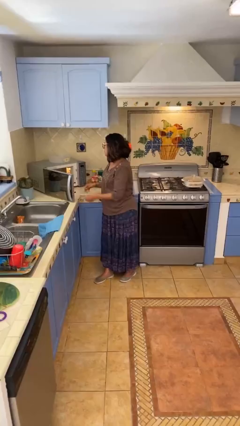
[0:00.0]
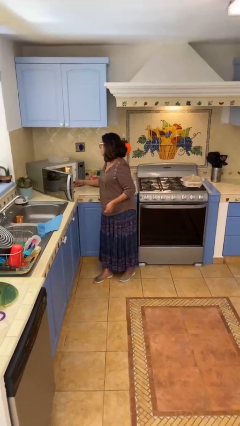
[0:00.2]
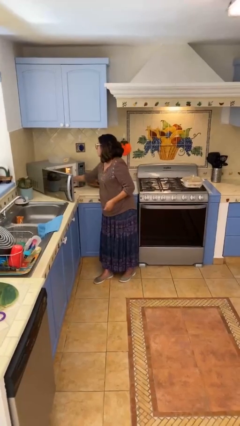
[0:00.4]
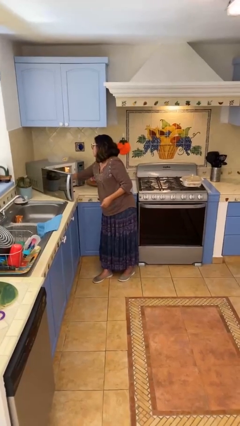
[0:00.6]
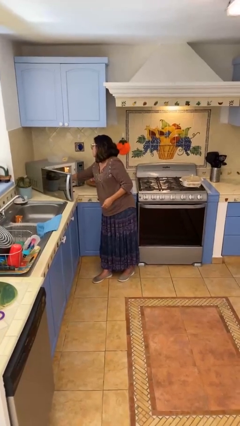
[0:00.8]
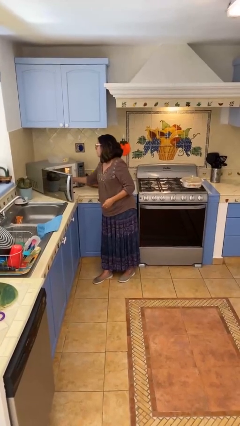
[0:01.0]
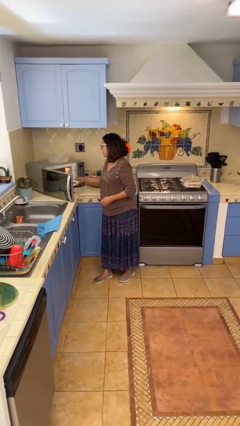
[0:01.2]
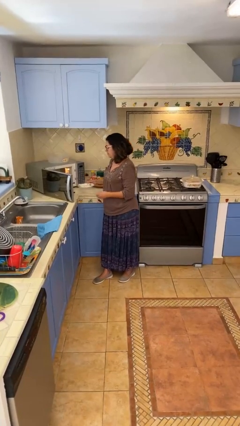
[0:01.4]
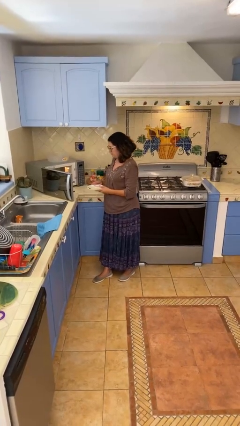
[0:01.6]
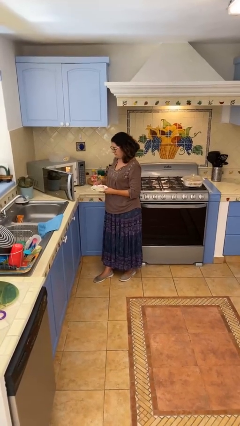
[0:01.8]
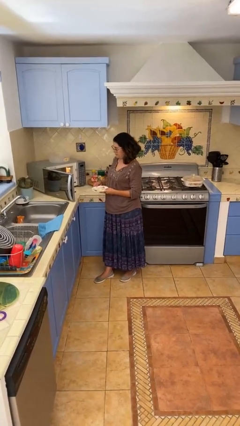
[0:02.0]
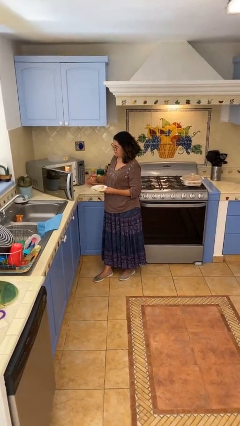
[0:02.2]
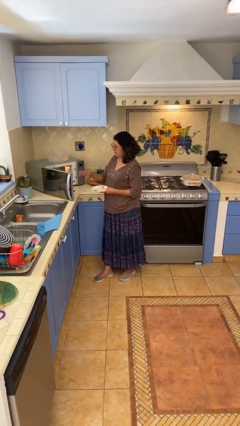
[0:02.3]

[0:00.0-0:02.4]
person takes object from microwave

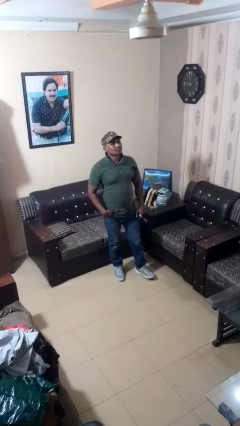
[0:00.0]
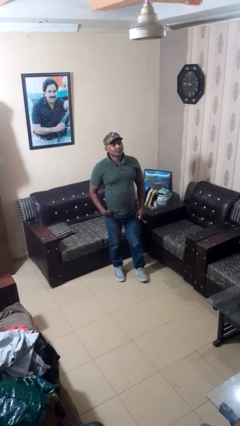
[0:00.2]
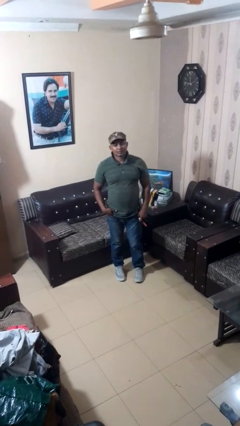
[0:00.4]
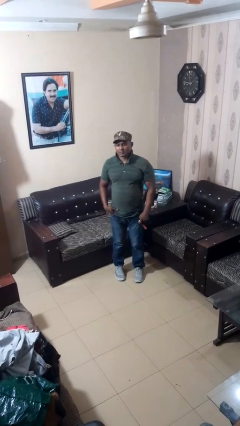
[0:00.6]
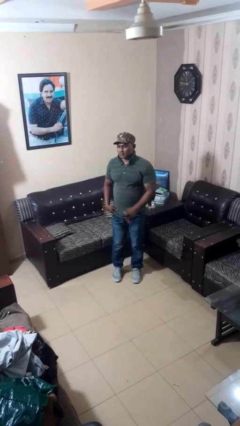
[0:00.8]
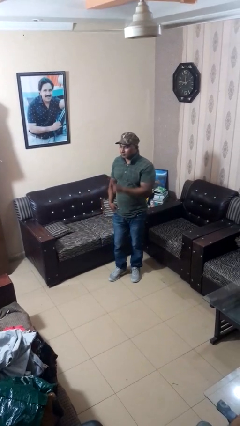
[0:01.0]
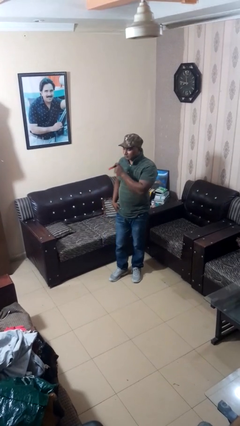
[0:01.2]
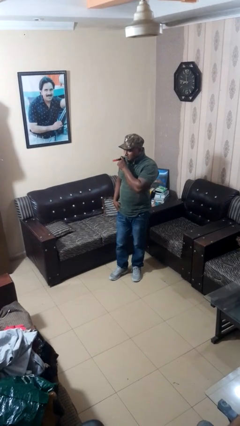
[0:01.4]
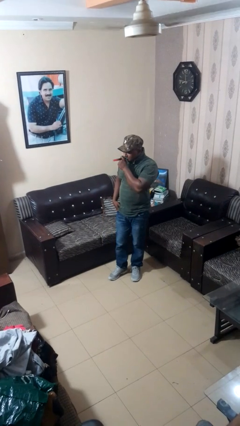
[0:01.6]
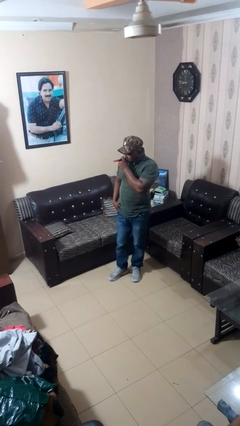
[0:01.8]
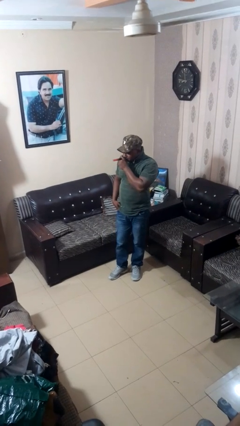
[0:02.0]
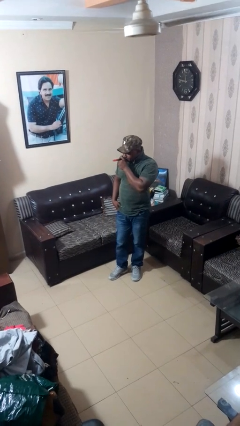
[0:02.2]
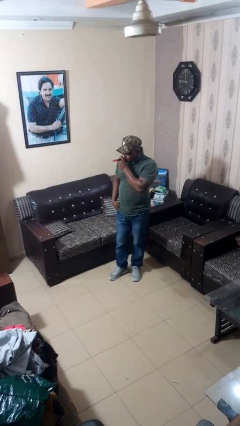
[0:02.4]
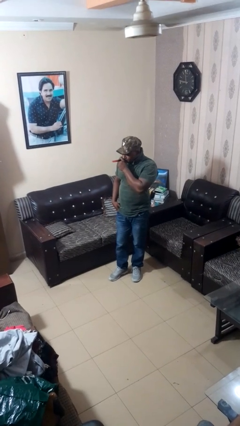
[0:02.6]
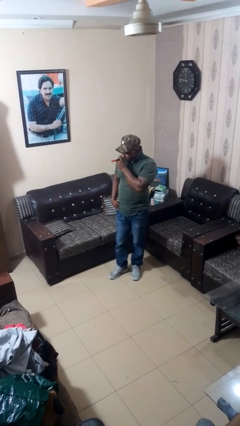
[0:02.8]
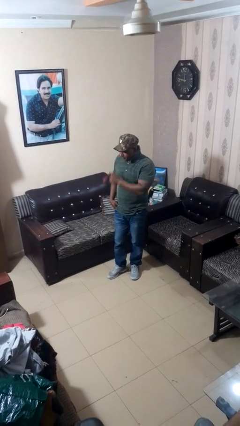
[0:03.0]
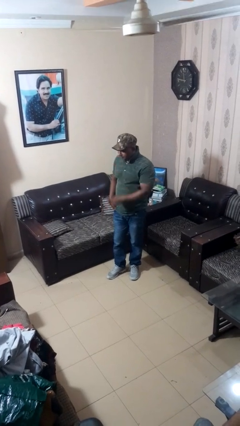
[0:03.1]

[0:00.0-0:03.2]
person vapes

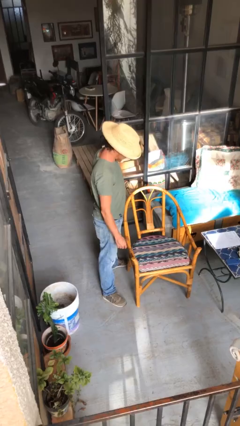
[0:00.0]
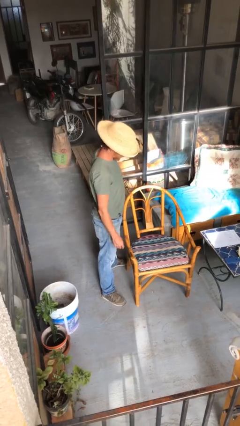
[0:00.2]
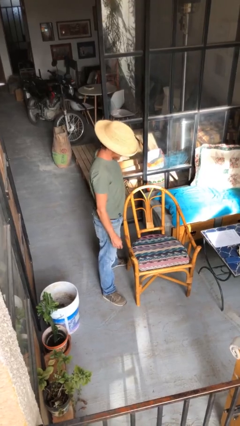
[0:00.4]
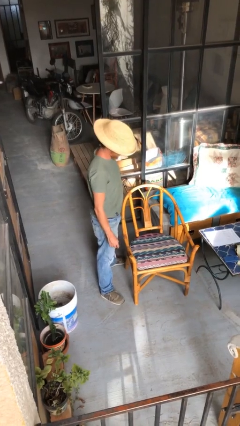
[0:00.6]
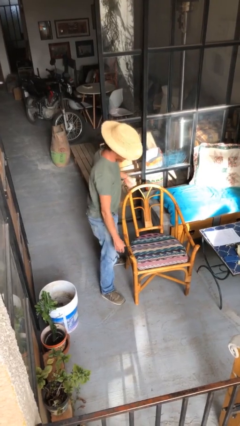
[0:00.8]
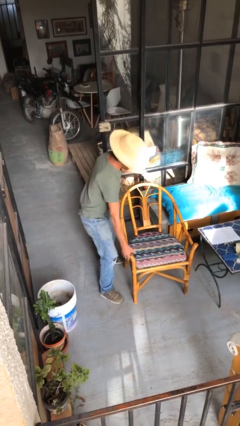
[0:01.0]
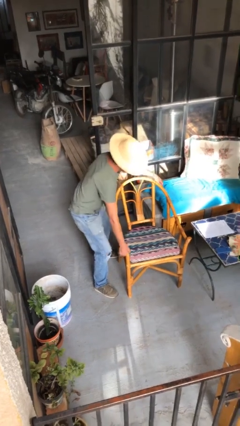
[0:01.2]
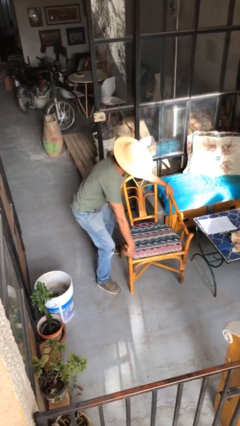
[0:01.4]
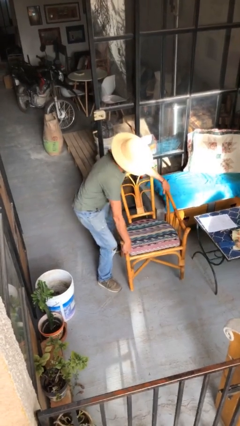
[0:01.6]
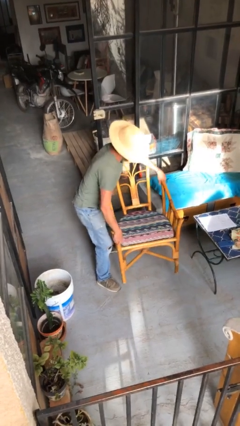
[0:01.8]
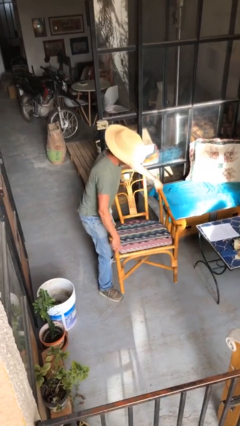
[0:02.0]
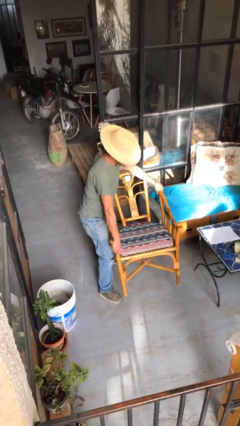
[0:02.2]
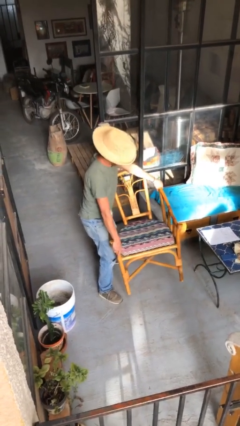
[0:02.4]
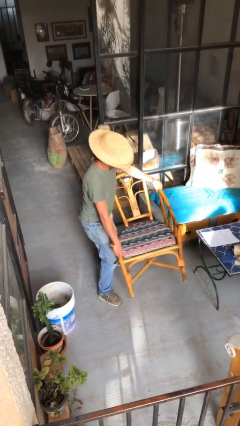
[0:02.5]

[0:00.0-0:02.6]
person picks up object from floor

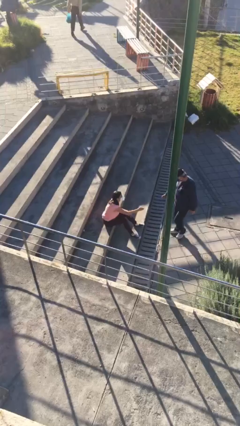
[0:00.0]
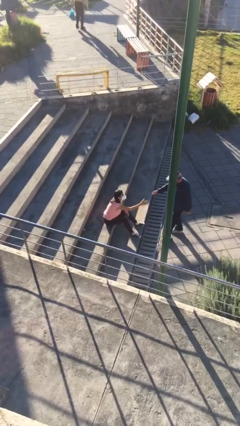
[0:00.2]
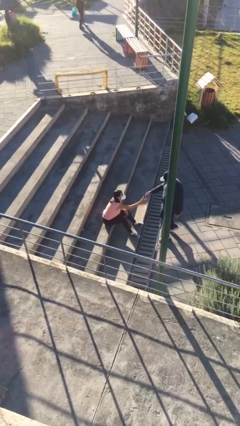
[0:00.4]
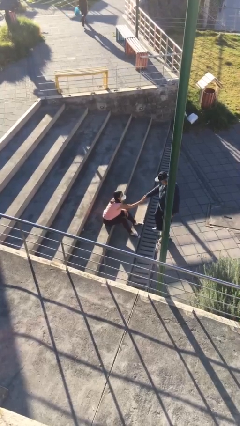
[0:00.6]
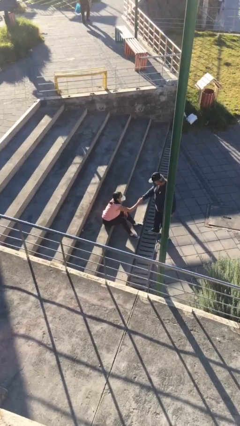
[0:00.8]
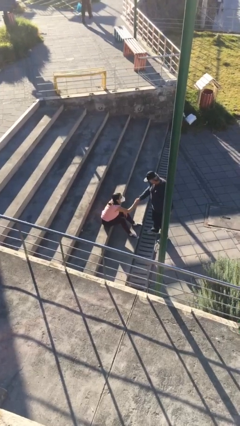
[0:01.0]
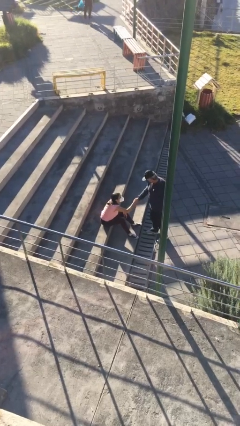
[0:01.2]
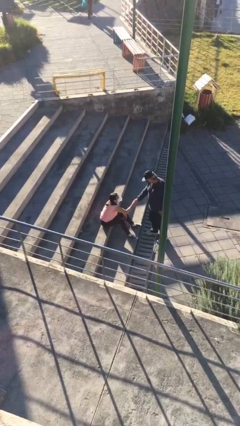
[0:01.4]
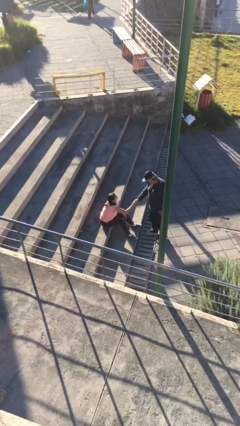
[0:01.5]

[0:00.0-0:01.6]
person shakes hand

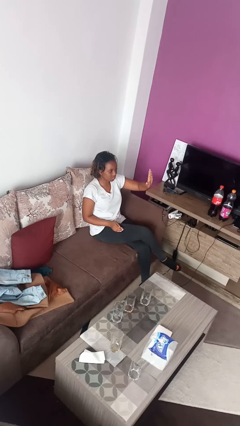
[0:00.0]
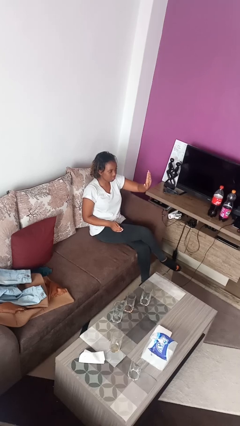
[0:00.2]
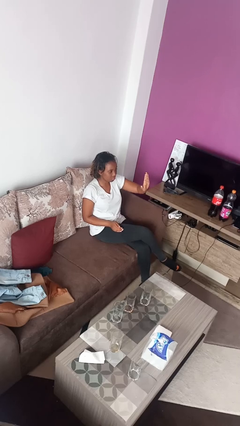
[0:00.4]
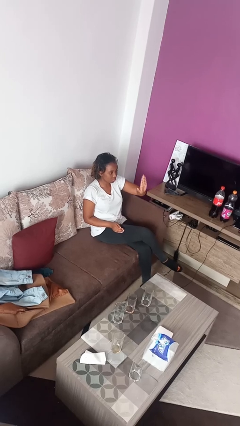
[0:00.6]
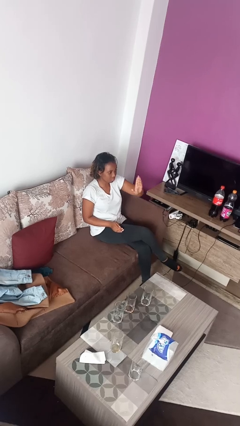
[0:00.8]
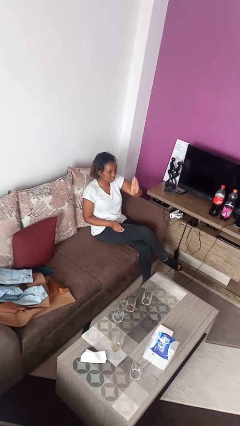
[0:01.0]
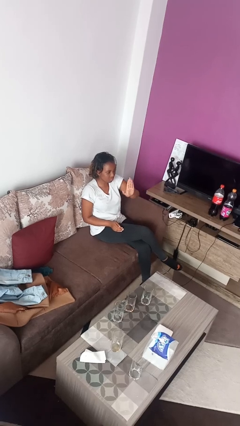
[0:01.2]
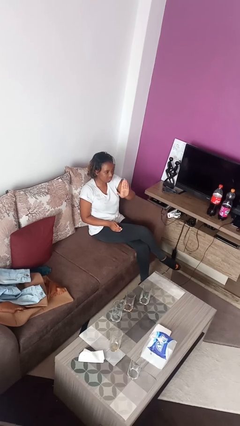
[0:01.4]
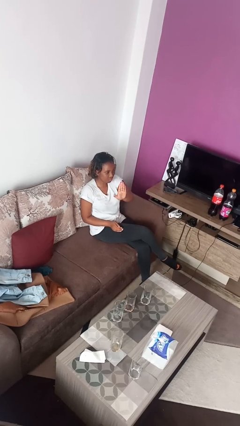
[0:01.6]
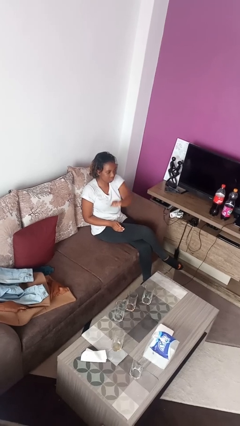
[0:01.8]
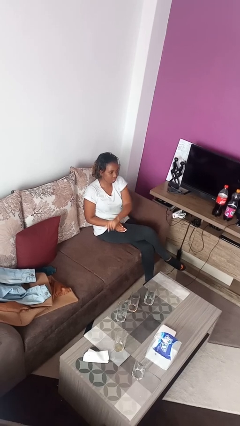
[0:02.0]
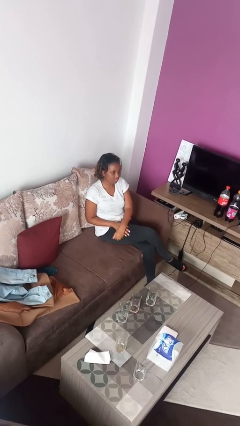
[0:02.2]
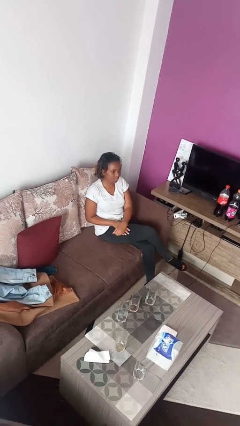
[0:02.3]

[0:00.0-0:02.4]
person gestures swipe right

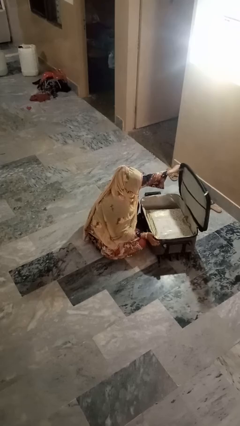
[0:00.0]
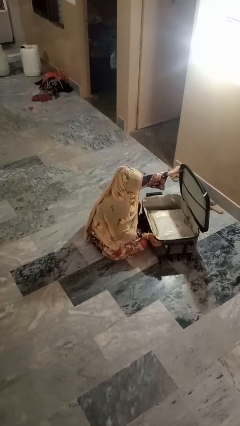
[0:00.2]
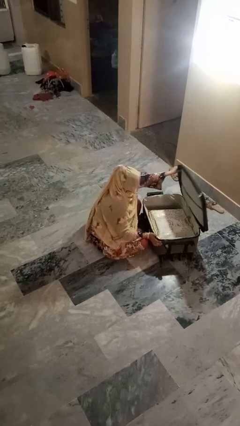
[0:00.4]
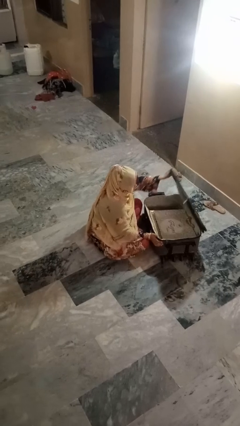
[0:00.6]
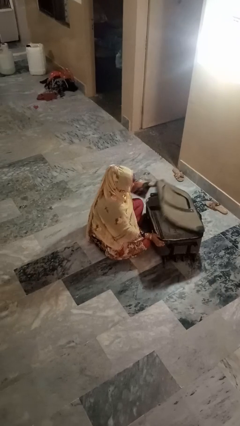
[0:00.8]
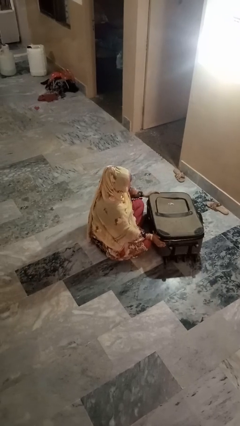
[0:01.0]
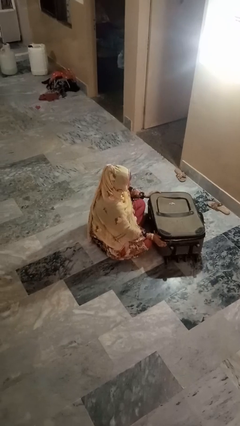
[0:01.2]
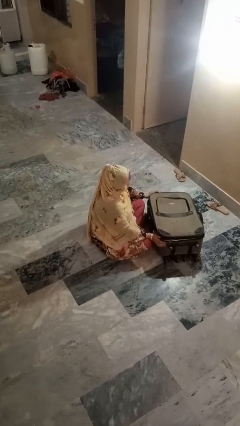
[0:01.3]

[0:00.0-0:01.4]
person closes suitcase

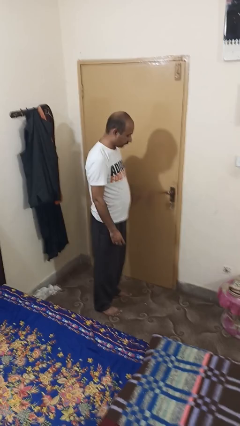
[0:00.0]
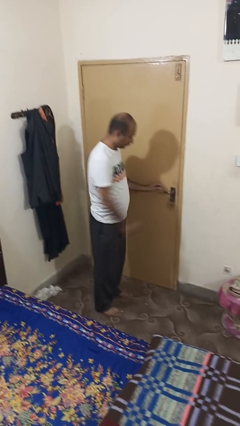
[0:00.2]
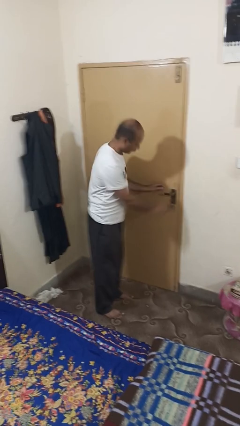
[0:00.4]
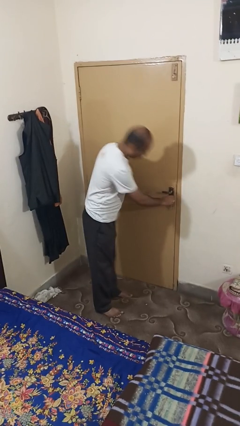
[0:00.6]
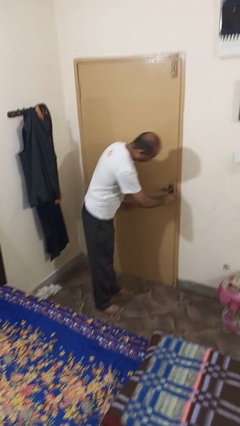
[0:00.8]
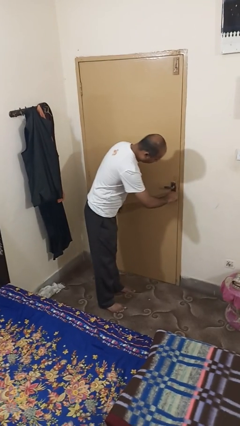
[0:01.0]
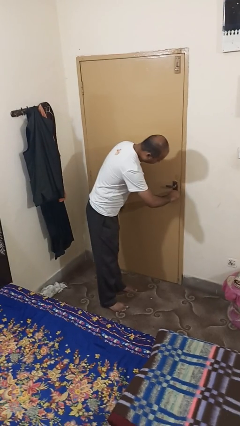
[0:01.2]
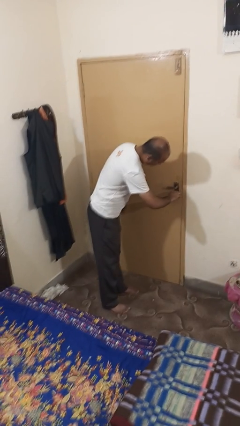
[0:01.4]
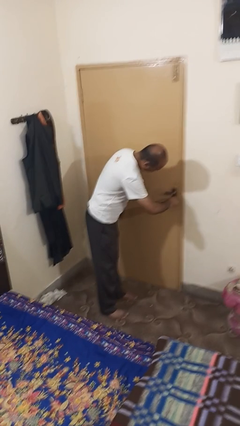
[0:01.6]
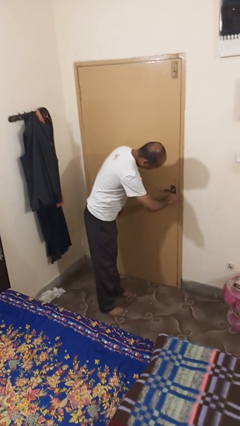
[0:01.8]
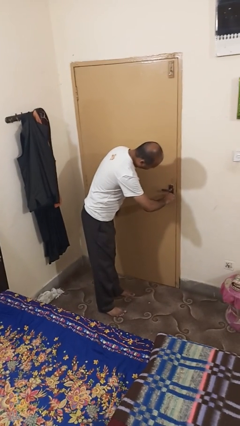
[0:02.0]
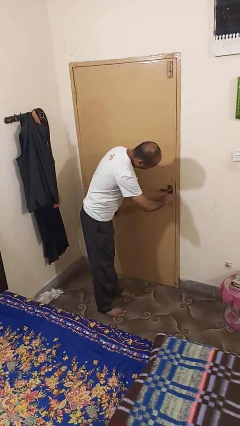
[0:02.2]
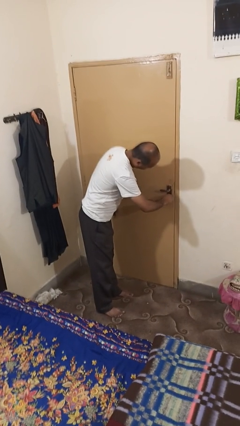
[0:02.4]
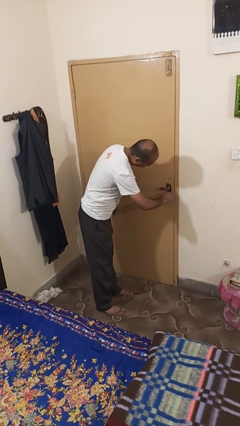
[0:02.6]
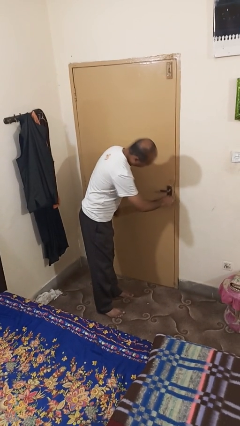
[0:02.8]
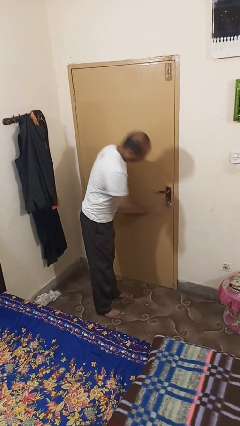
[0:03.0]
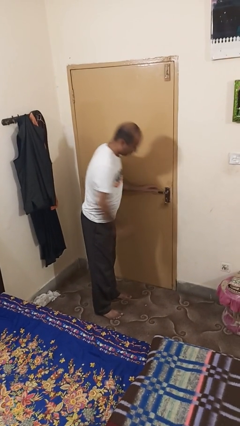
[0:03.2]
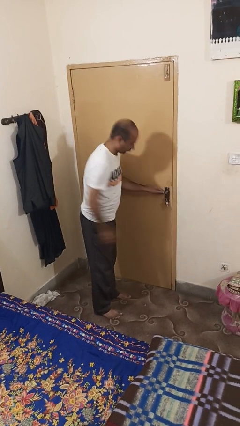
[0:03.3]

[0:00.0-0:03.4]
person unlocks door with keys
